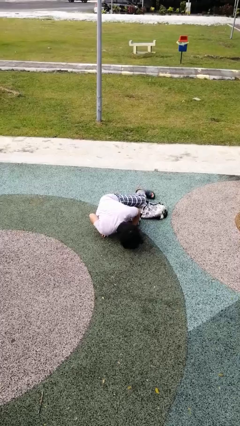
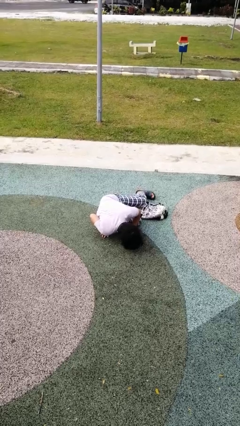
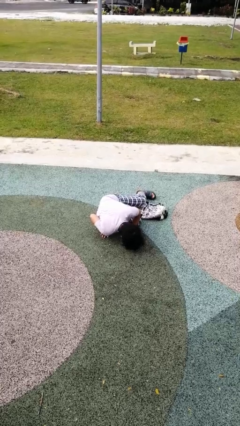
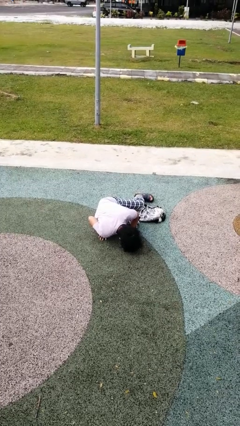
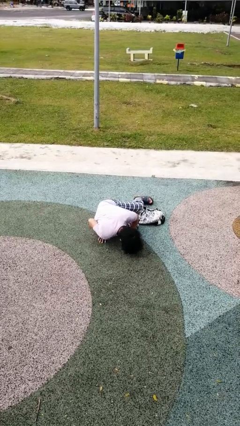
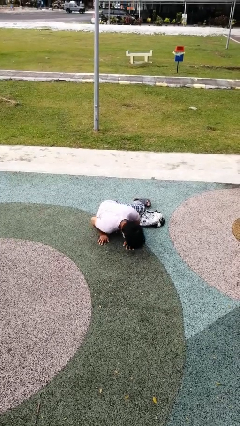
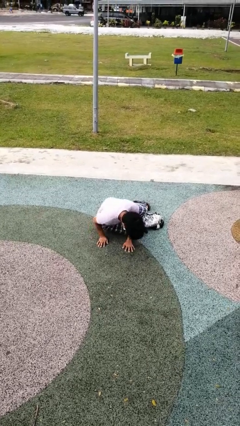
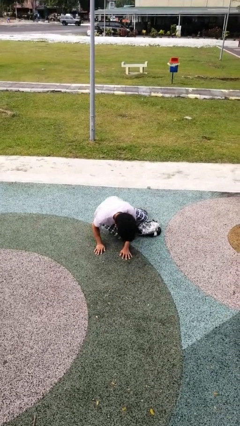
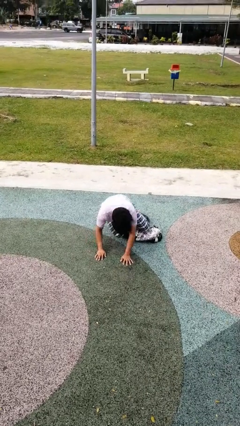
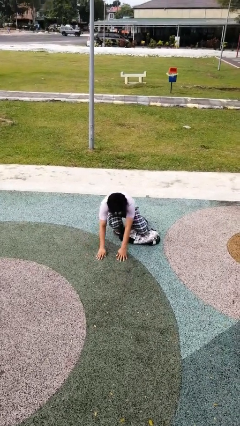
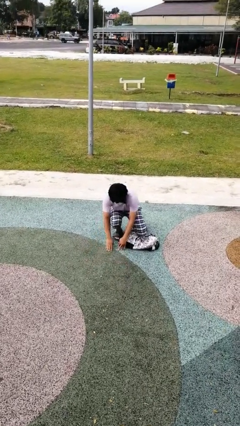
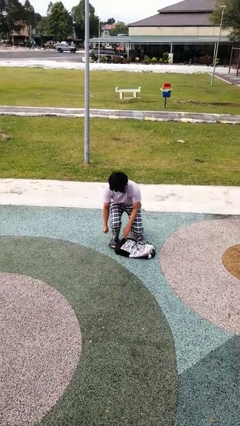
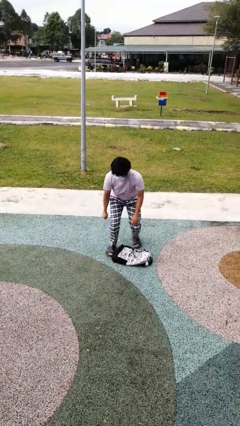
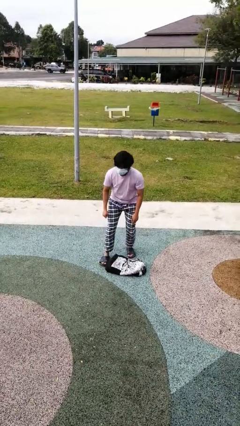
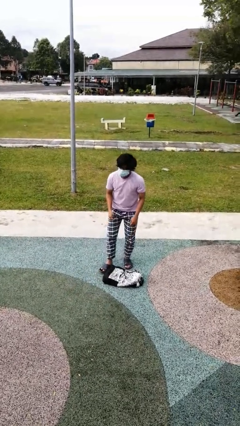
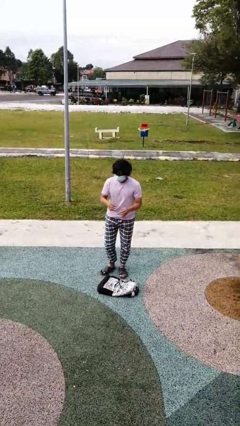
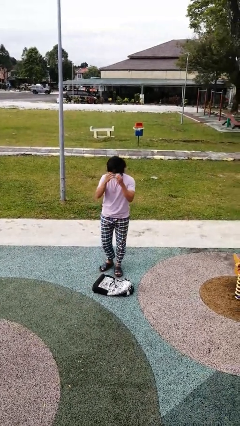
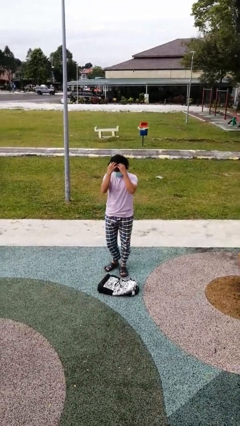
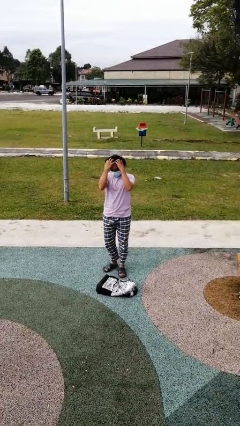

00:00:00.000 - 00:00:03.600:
person stands up from floor

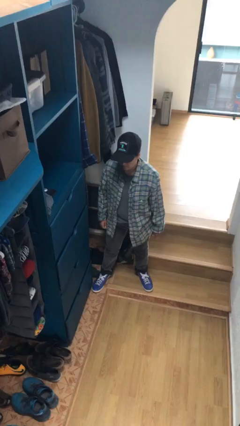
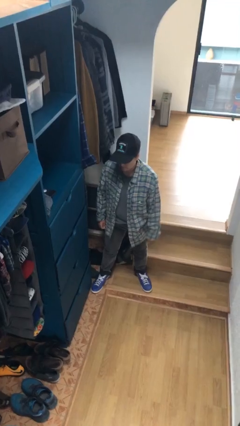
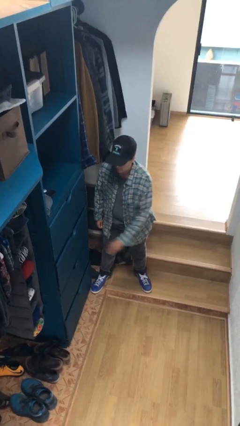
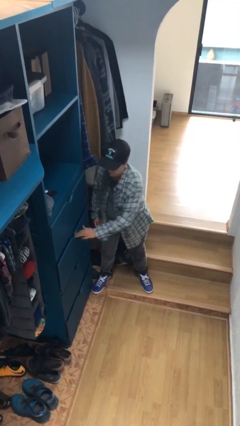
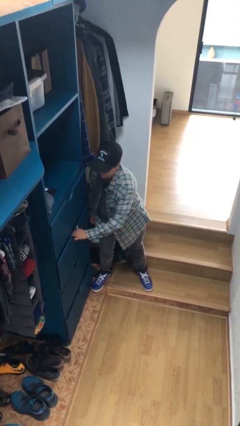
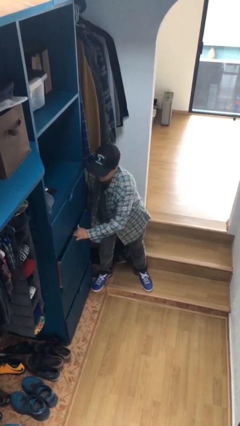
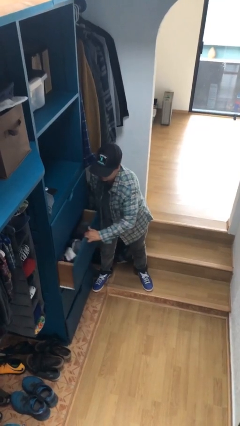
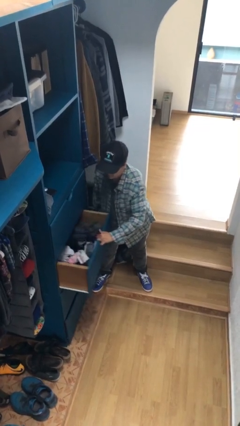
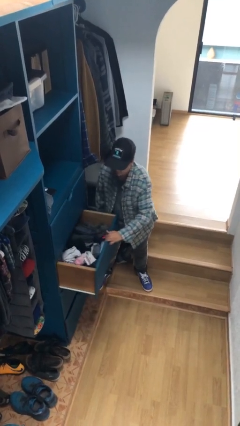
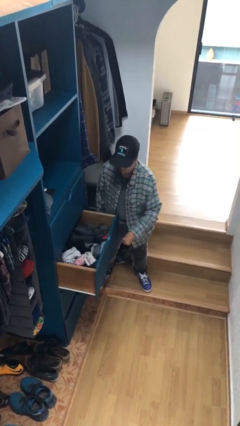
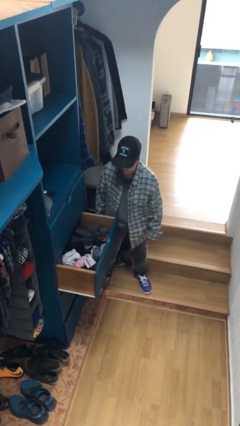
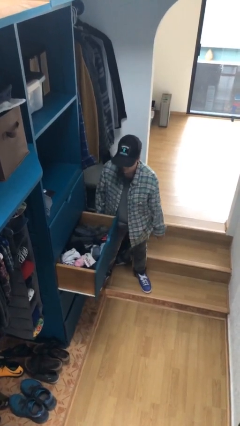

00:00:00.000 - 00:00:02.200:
person opens dresser drawer

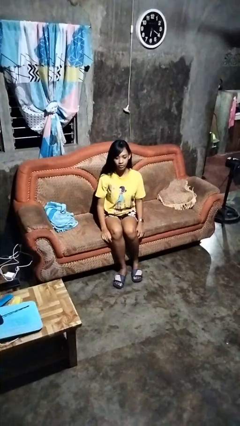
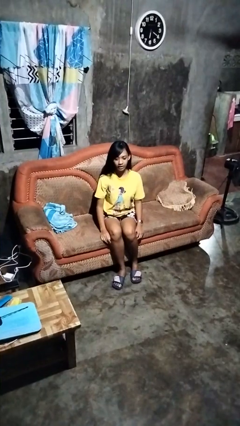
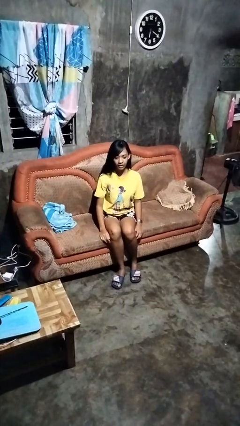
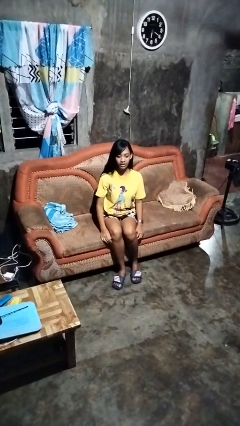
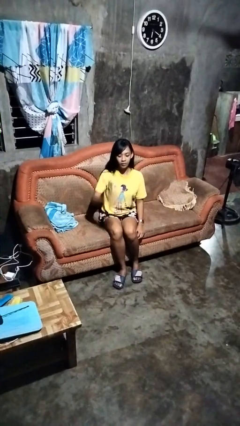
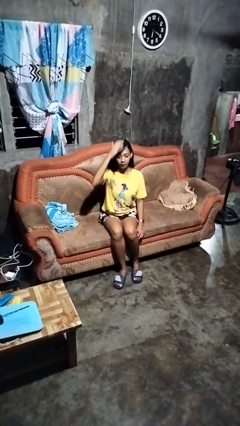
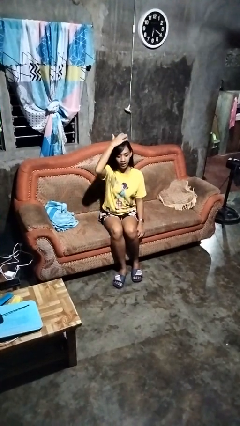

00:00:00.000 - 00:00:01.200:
person pats head

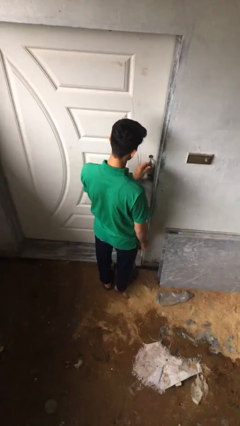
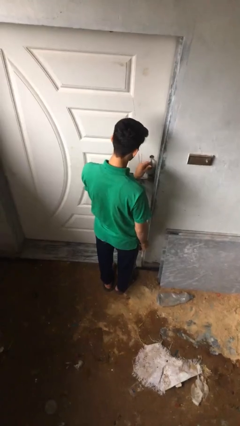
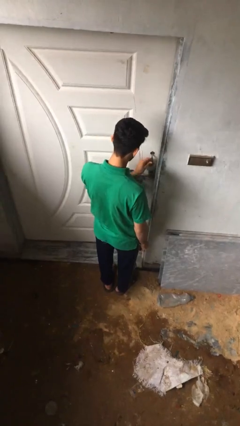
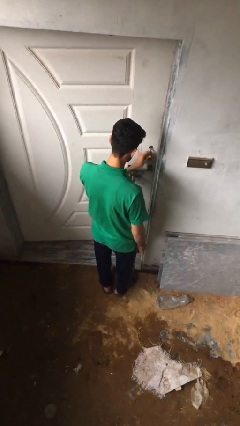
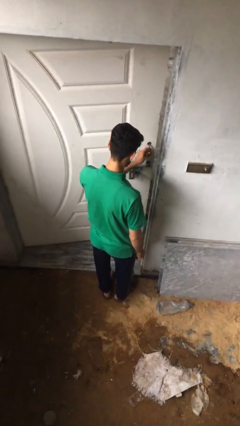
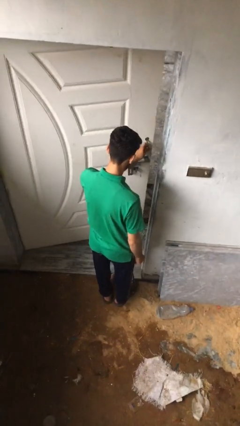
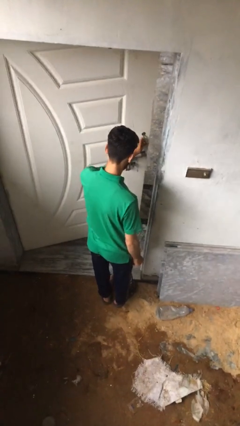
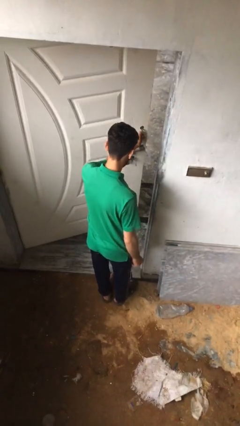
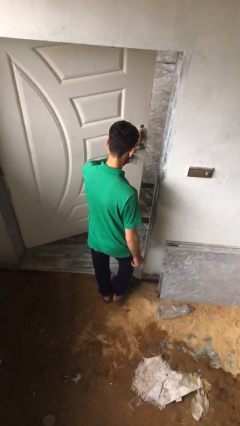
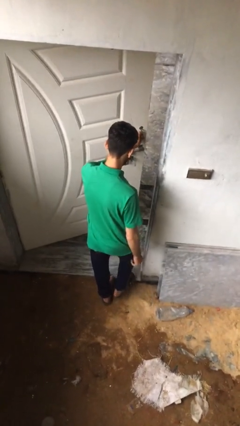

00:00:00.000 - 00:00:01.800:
person opens facility door

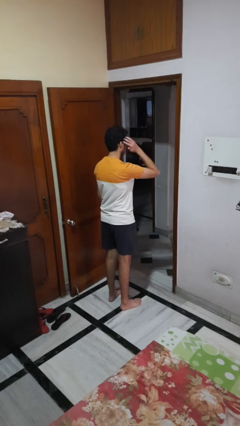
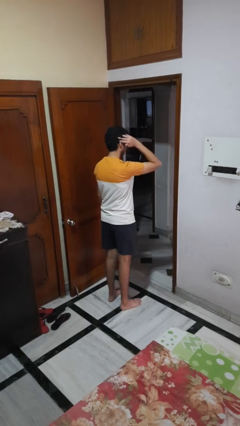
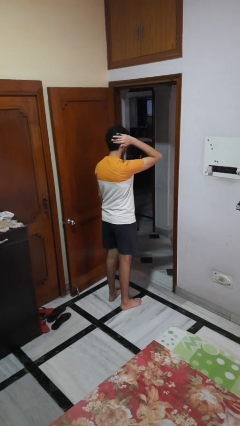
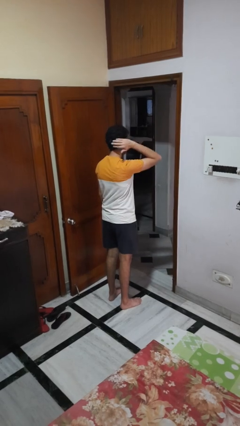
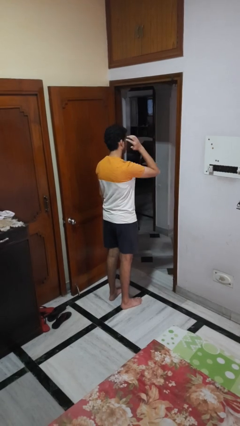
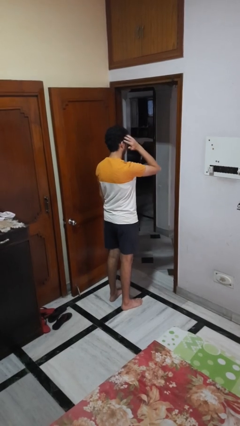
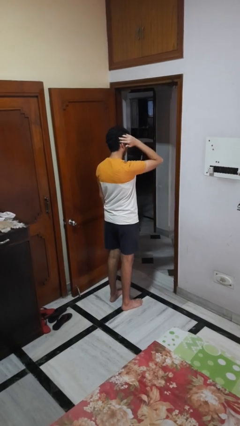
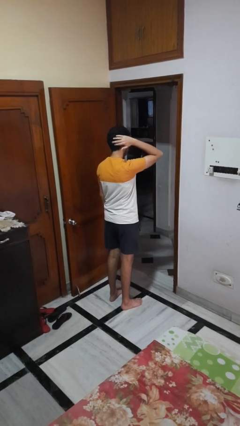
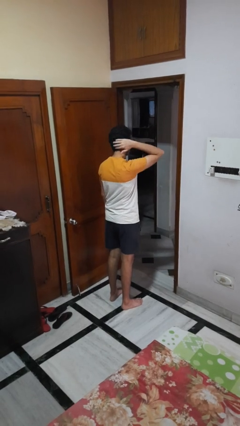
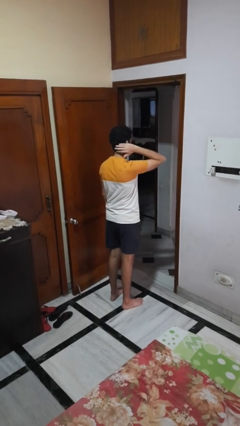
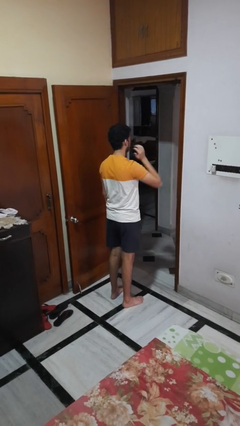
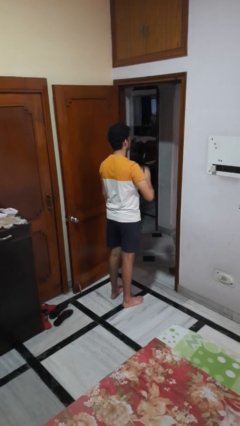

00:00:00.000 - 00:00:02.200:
person strokes hair

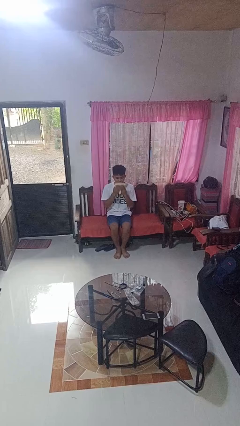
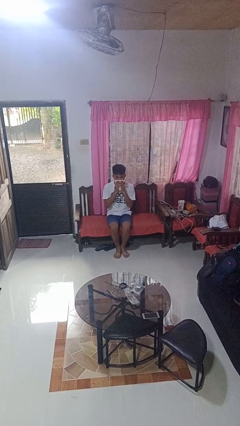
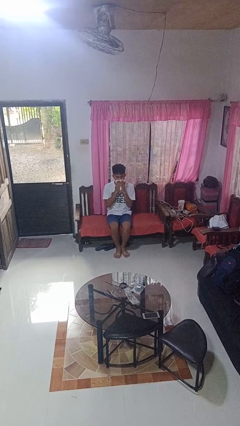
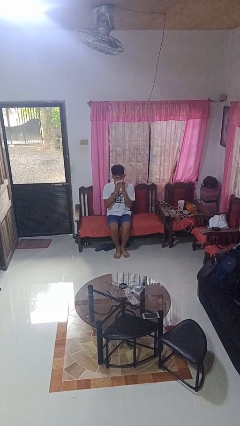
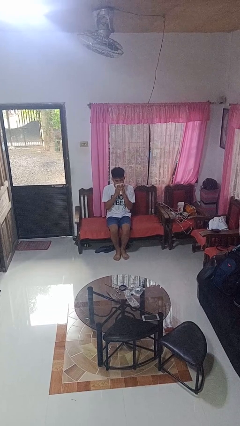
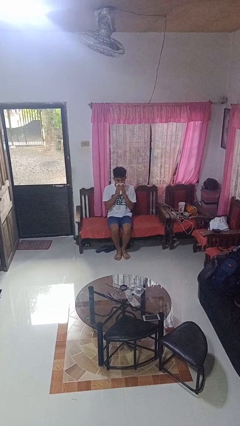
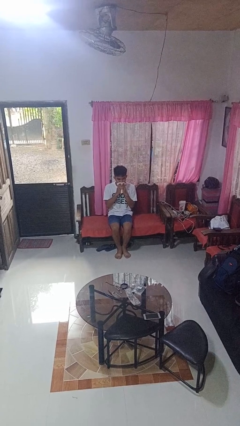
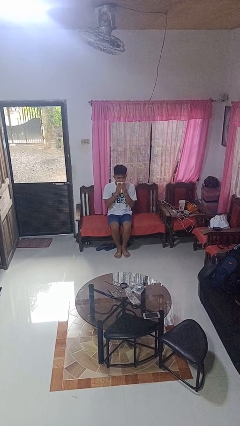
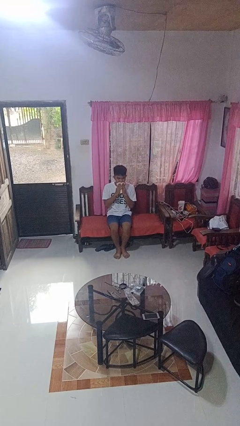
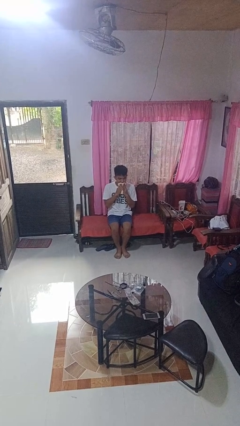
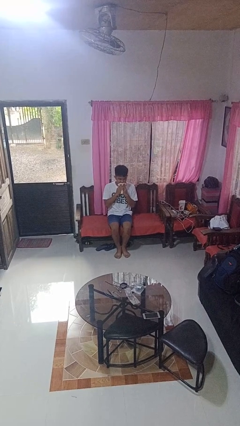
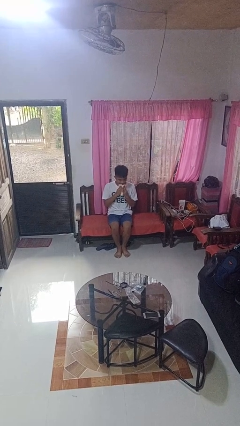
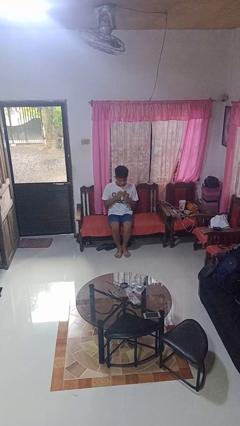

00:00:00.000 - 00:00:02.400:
person wipes mouth with napkin

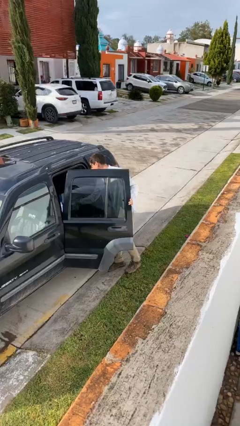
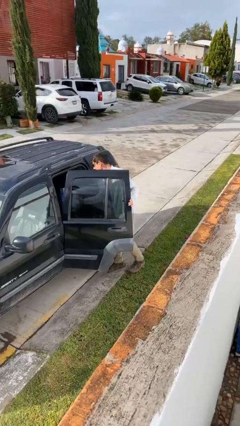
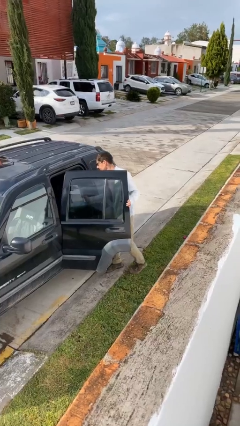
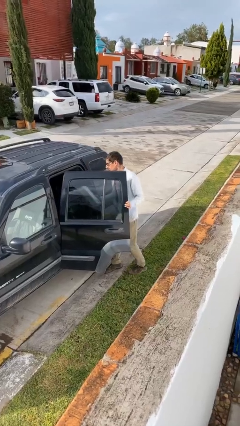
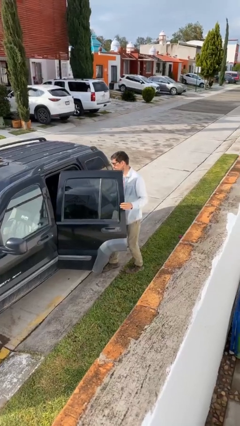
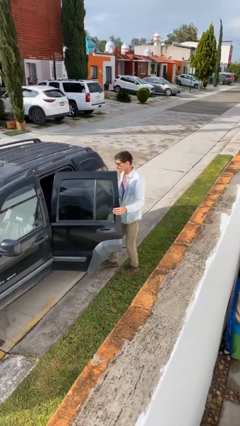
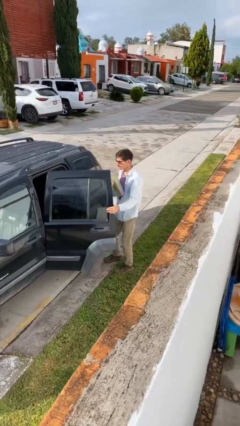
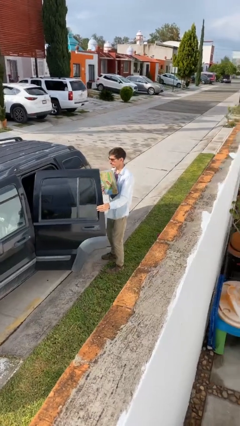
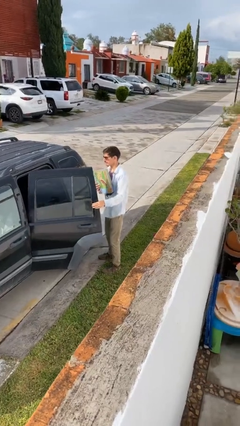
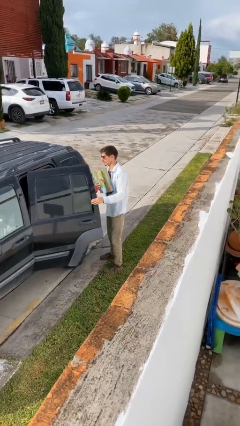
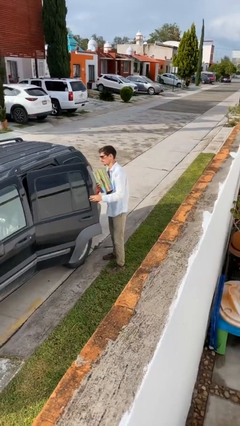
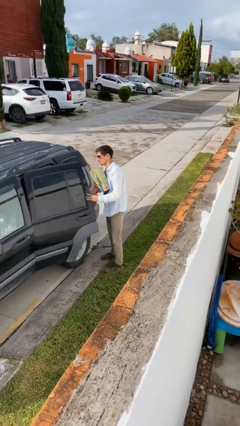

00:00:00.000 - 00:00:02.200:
person unloads car

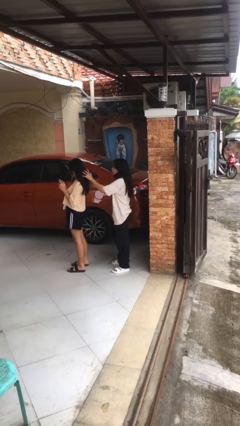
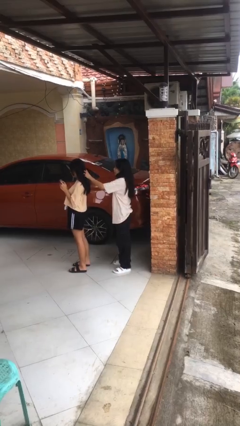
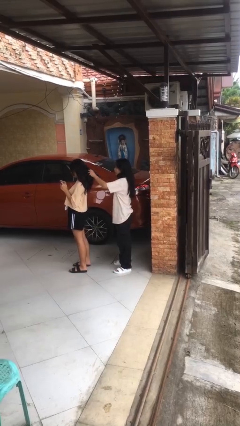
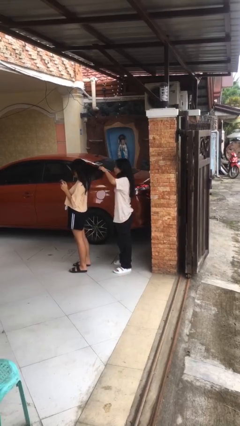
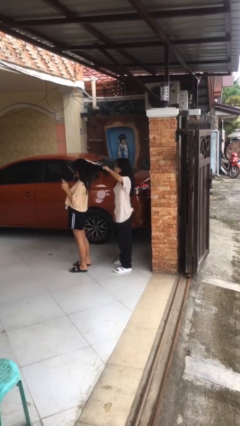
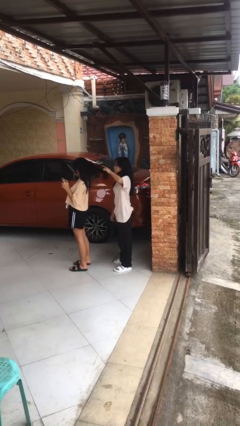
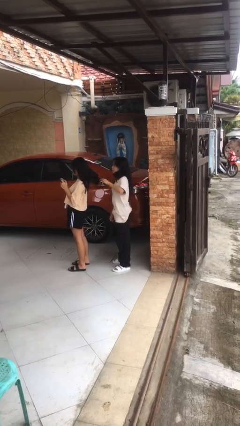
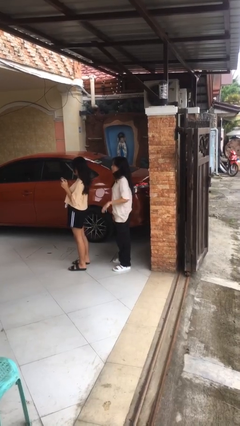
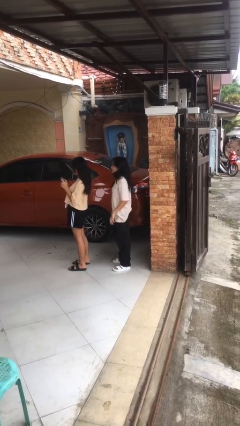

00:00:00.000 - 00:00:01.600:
person grabs person by hair
